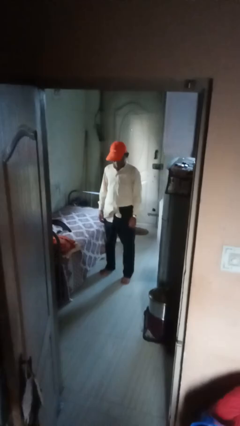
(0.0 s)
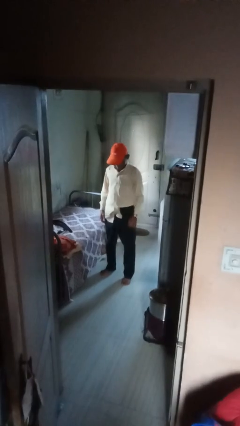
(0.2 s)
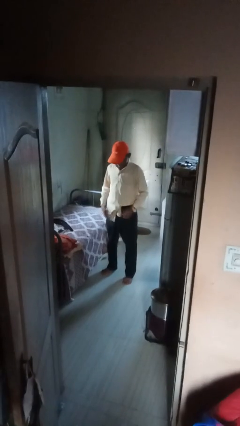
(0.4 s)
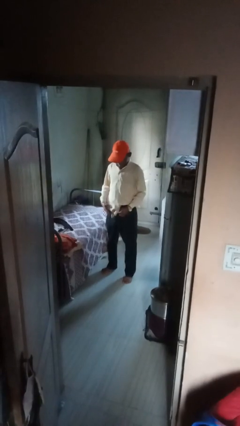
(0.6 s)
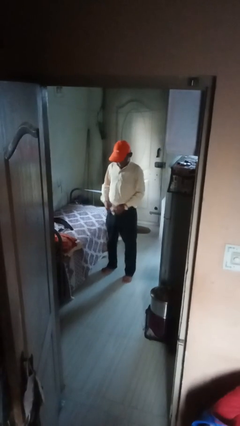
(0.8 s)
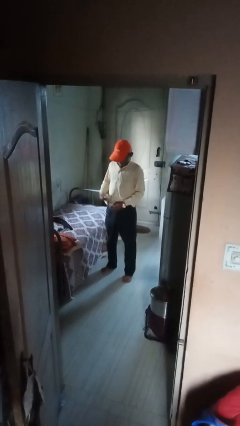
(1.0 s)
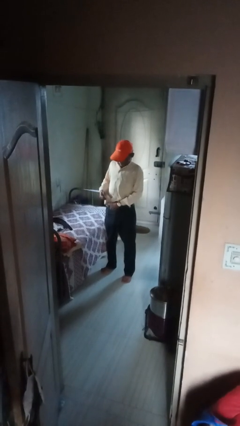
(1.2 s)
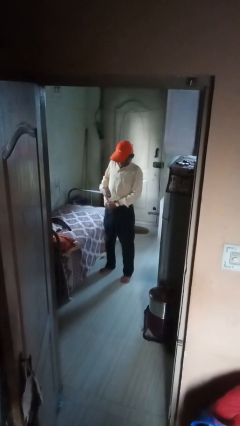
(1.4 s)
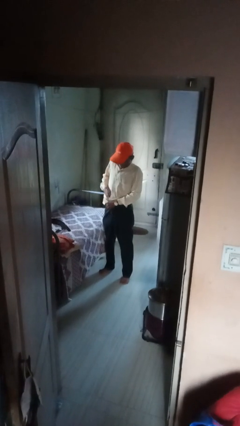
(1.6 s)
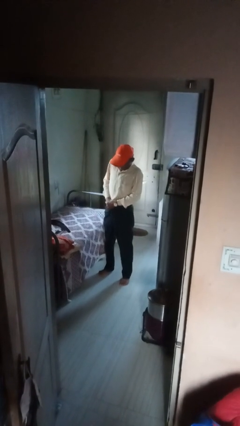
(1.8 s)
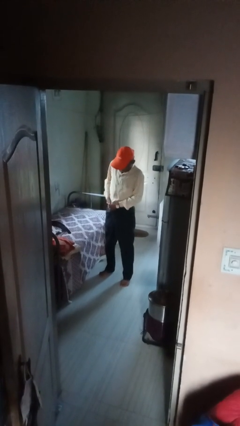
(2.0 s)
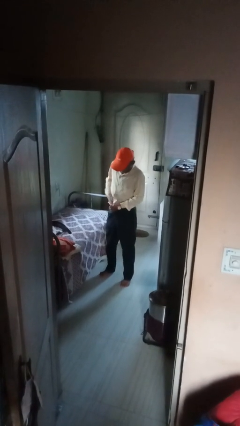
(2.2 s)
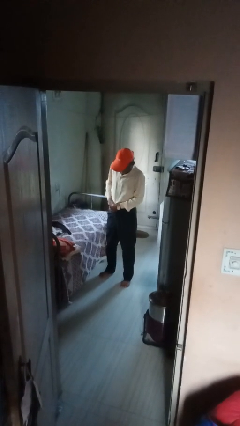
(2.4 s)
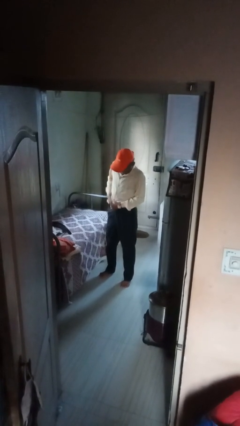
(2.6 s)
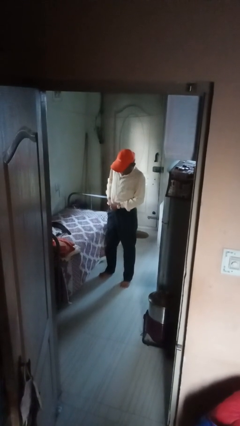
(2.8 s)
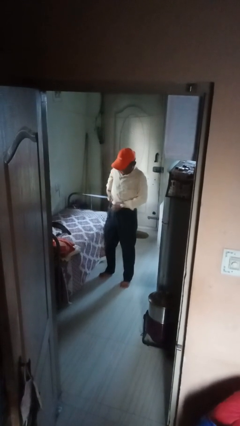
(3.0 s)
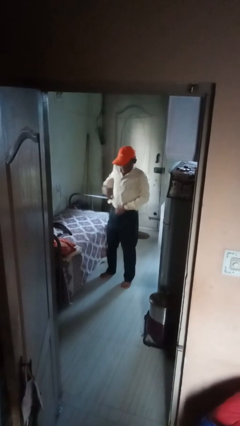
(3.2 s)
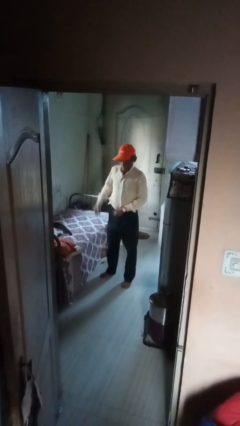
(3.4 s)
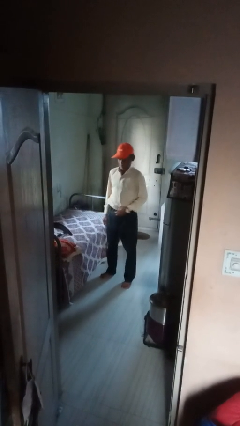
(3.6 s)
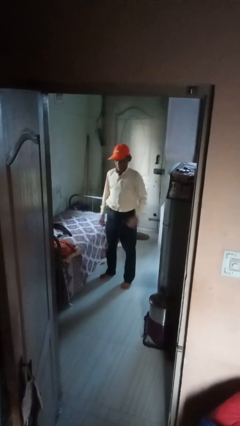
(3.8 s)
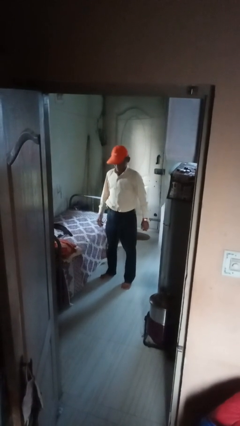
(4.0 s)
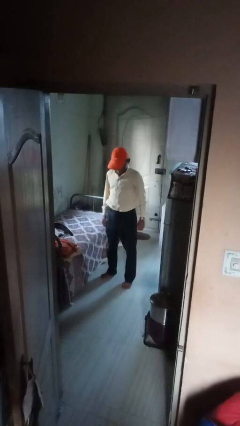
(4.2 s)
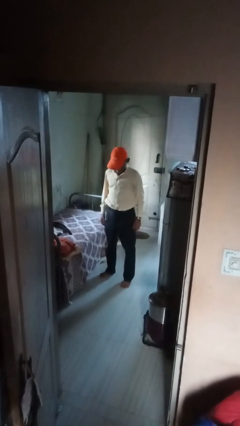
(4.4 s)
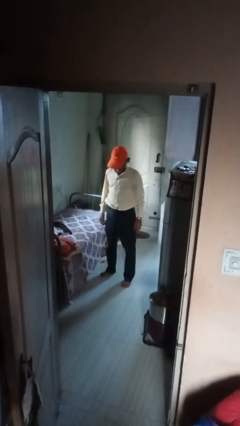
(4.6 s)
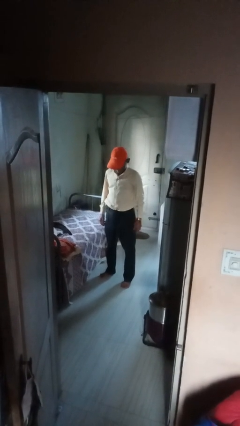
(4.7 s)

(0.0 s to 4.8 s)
person tucks in shirt

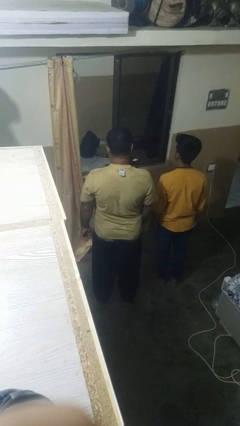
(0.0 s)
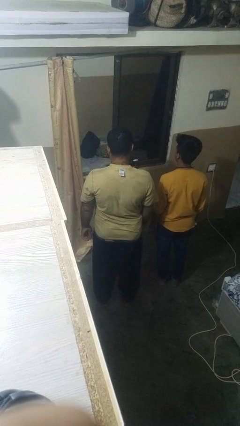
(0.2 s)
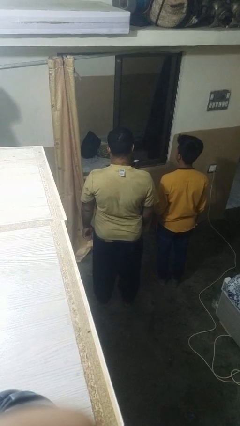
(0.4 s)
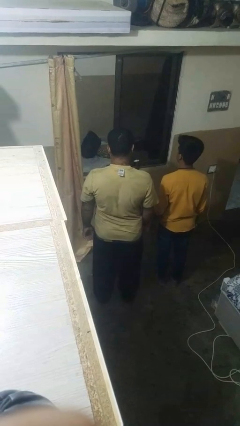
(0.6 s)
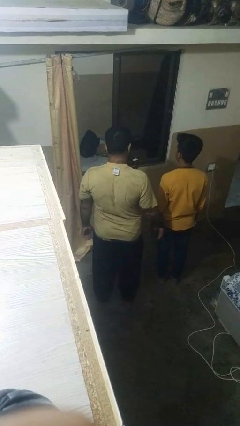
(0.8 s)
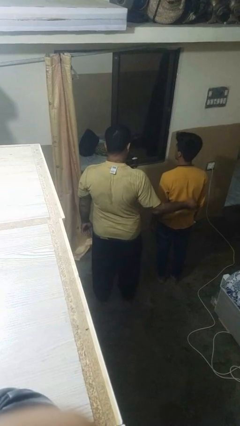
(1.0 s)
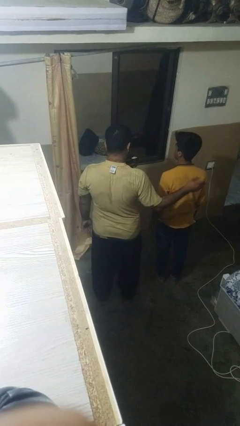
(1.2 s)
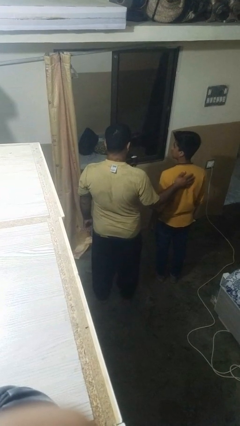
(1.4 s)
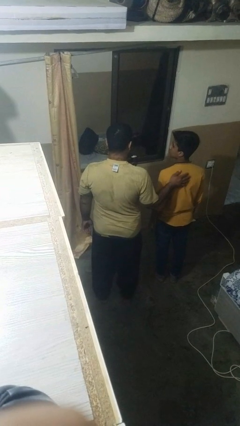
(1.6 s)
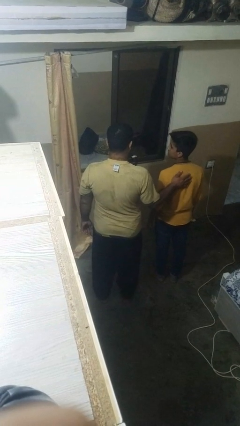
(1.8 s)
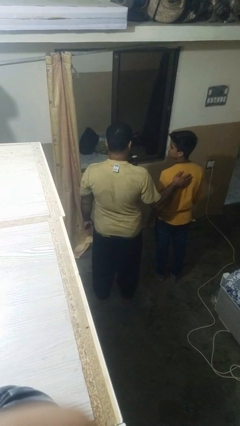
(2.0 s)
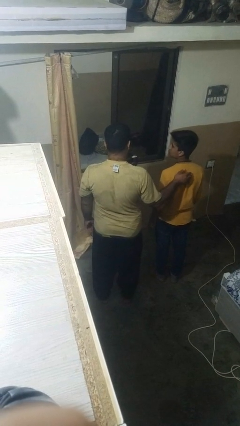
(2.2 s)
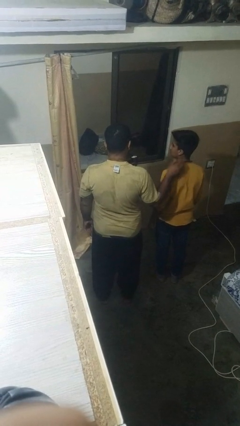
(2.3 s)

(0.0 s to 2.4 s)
person touches back of person

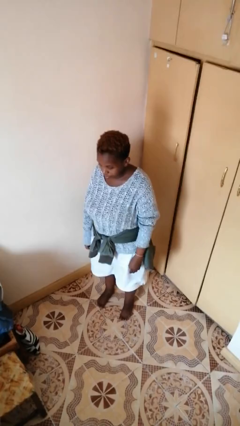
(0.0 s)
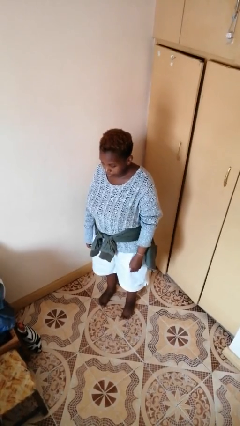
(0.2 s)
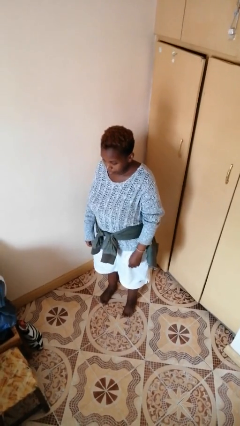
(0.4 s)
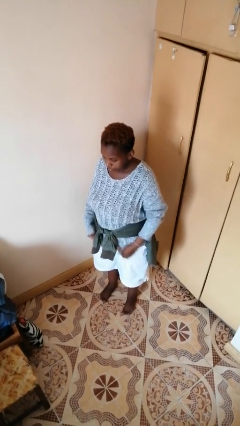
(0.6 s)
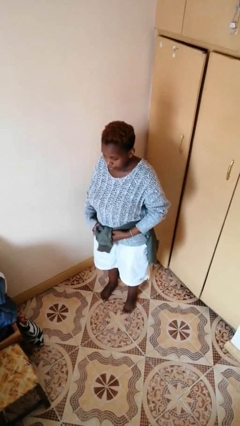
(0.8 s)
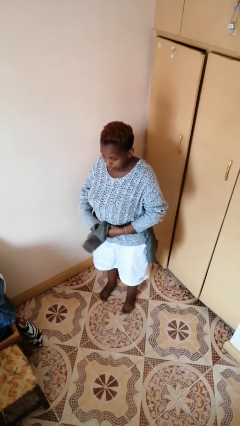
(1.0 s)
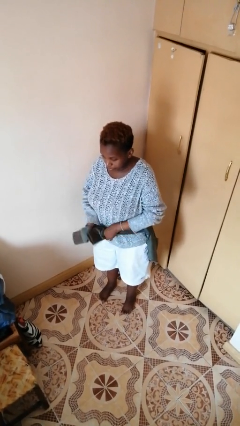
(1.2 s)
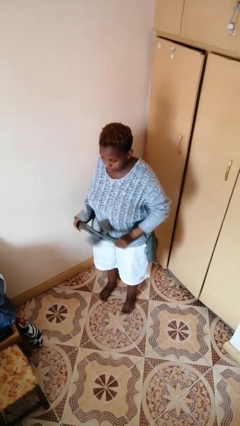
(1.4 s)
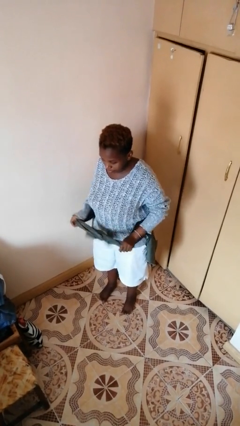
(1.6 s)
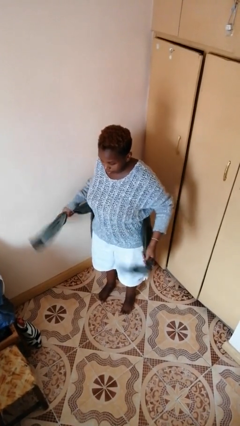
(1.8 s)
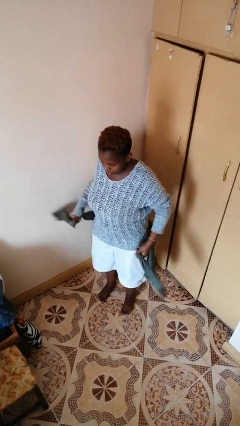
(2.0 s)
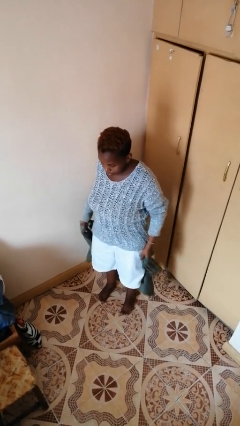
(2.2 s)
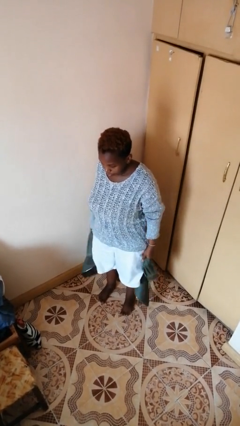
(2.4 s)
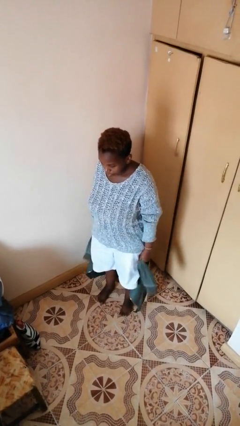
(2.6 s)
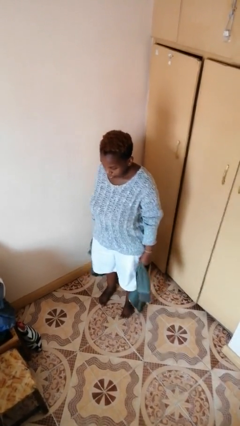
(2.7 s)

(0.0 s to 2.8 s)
person unties jacket around waist

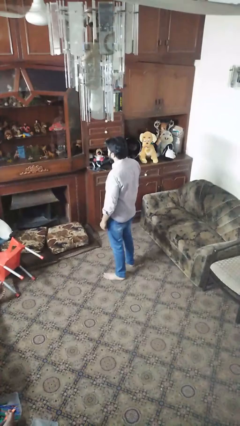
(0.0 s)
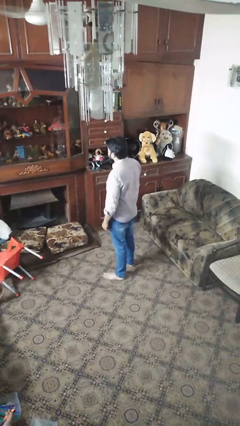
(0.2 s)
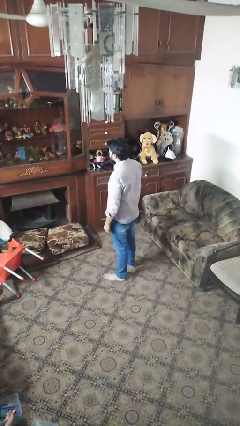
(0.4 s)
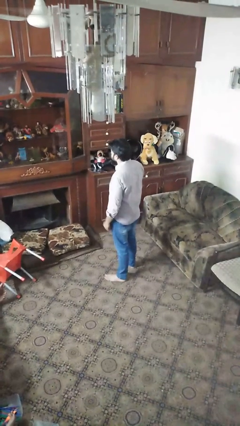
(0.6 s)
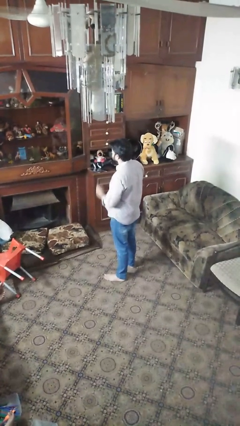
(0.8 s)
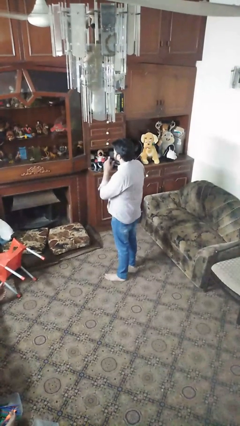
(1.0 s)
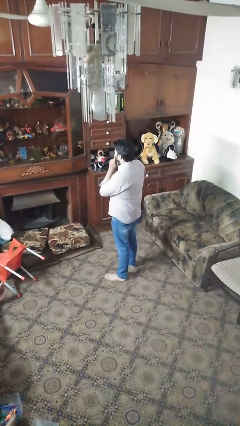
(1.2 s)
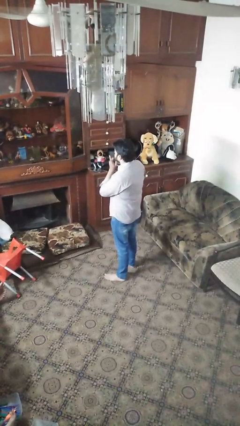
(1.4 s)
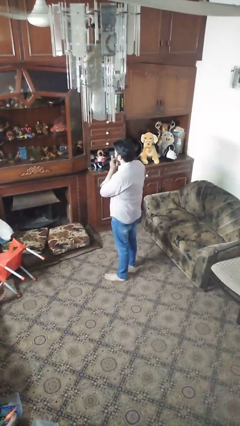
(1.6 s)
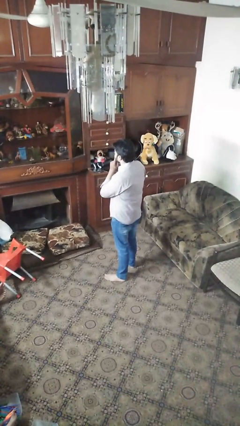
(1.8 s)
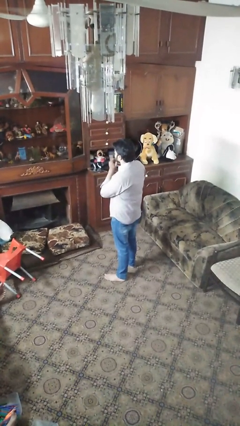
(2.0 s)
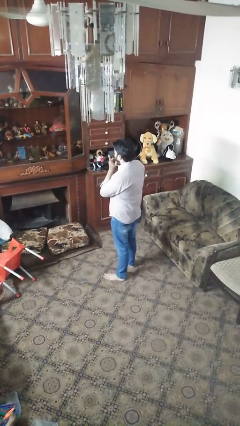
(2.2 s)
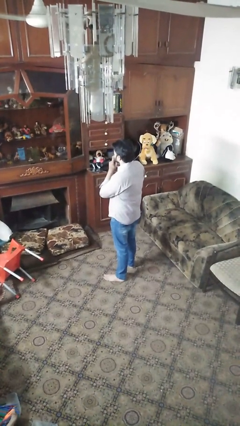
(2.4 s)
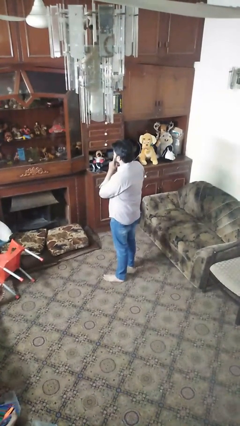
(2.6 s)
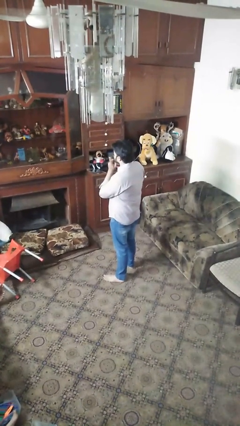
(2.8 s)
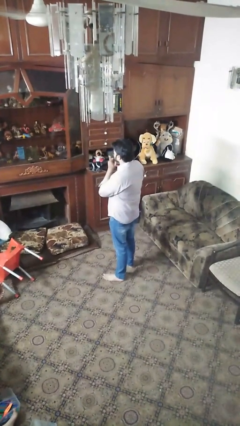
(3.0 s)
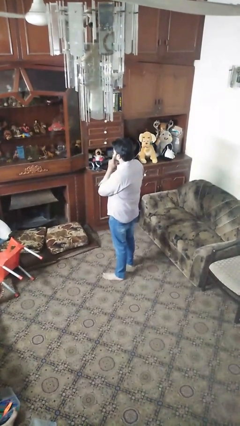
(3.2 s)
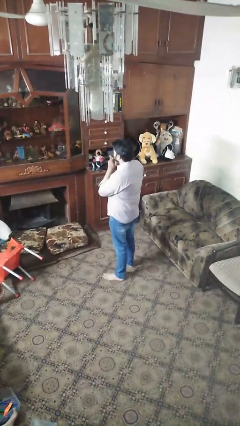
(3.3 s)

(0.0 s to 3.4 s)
person strokes chin

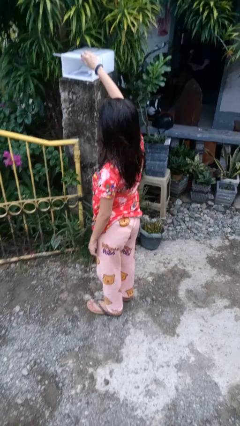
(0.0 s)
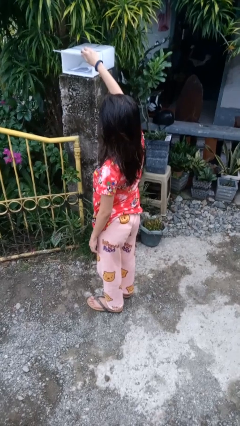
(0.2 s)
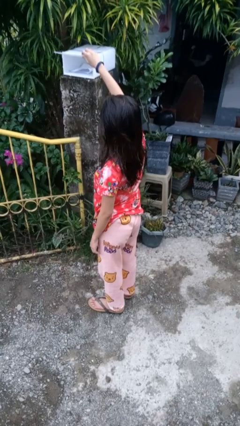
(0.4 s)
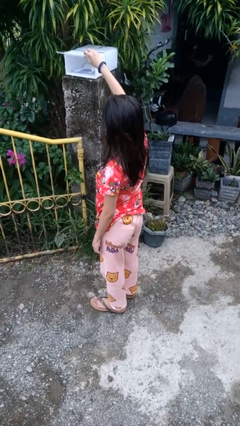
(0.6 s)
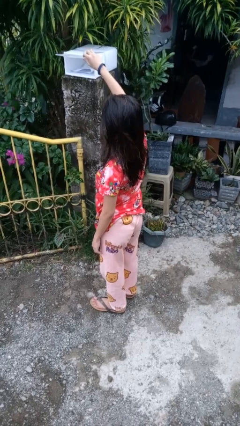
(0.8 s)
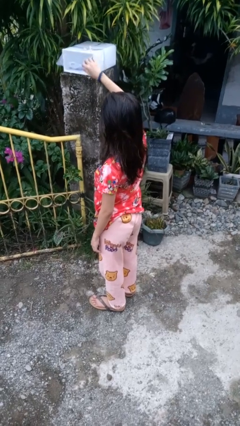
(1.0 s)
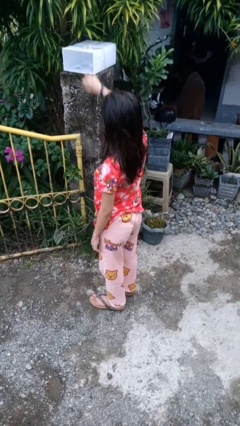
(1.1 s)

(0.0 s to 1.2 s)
person closes mailbox

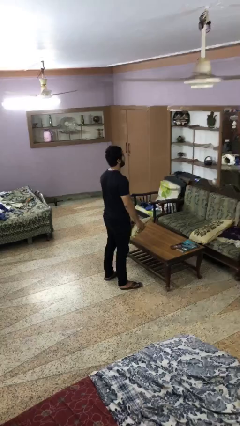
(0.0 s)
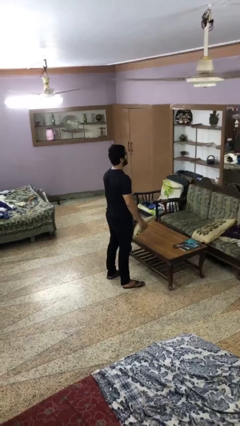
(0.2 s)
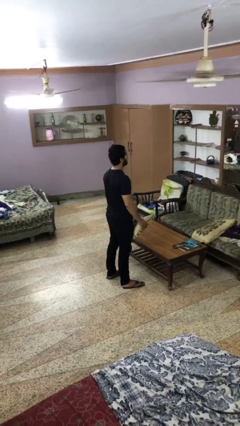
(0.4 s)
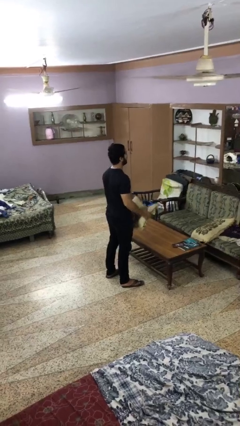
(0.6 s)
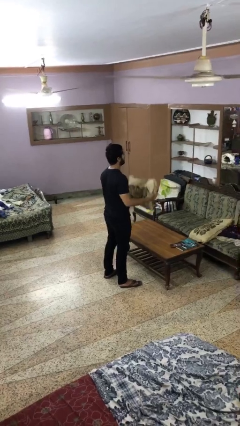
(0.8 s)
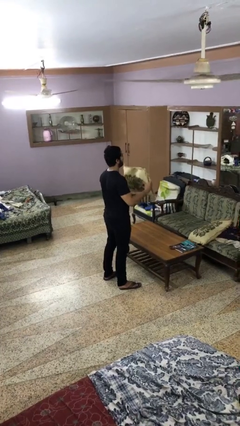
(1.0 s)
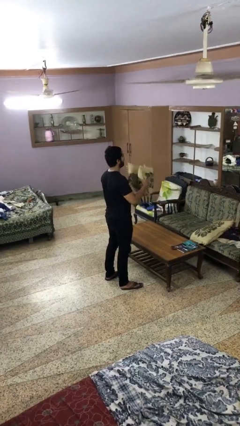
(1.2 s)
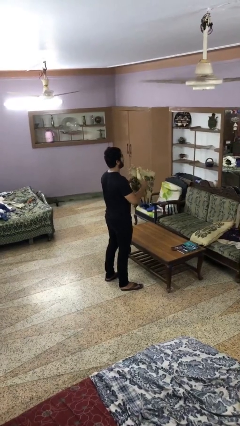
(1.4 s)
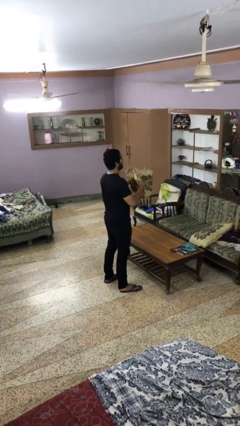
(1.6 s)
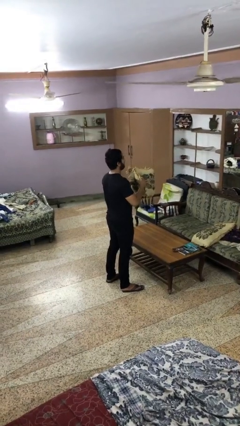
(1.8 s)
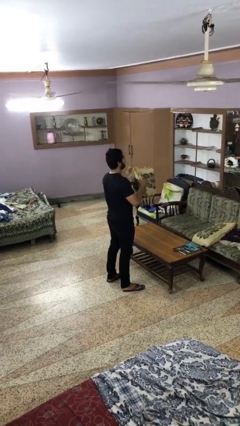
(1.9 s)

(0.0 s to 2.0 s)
person squeezes object

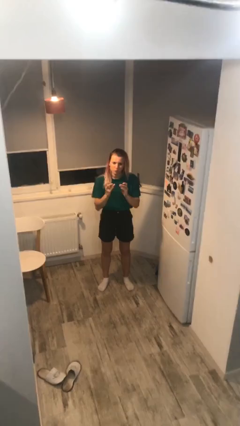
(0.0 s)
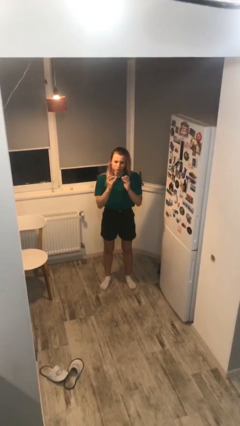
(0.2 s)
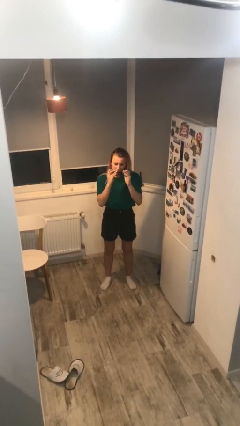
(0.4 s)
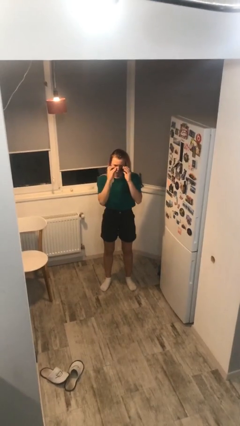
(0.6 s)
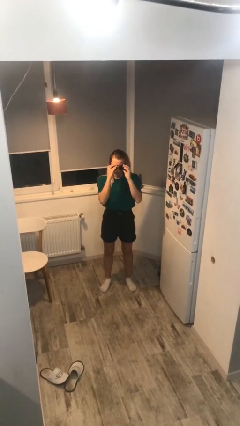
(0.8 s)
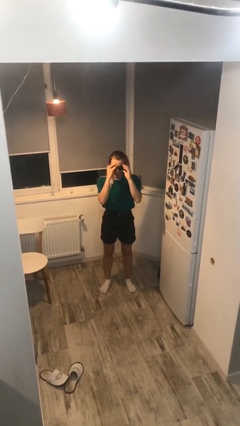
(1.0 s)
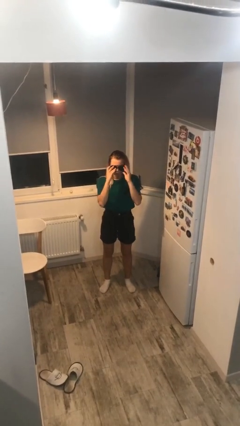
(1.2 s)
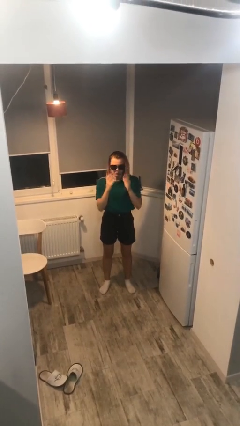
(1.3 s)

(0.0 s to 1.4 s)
person puts on glasses
